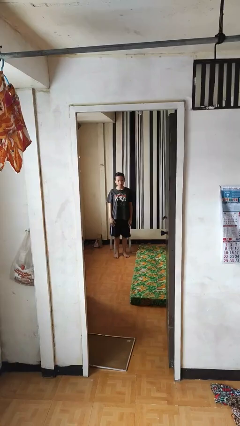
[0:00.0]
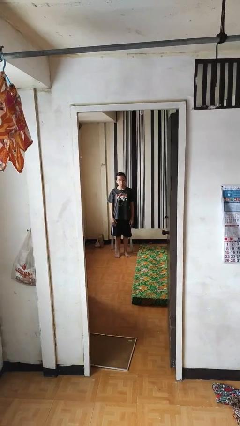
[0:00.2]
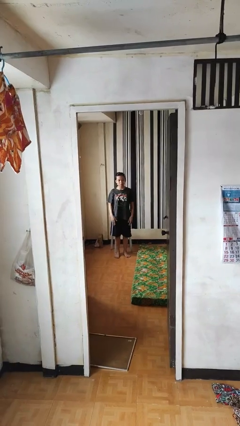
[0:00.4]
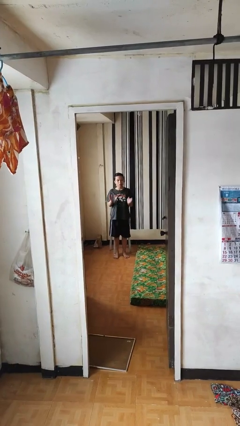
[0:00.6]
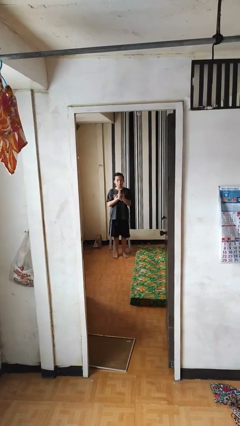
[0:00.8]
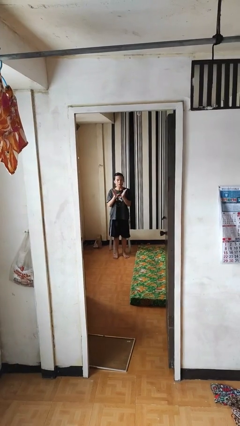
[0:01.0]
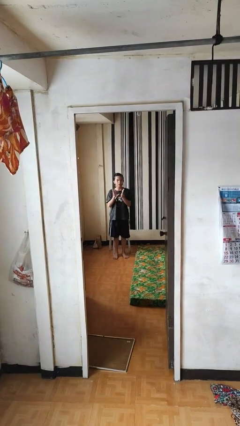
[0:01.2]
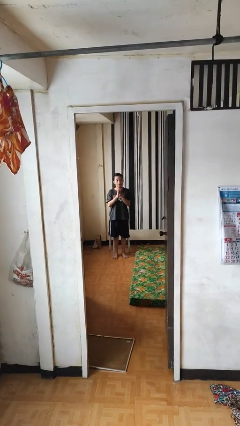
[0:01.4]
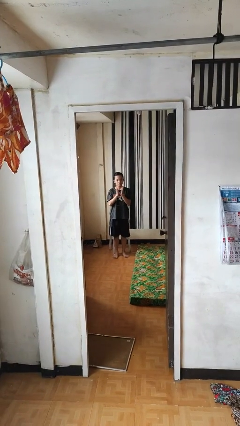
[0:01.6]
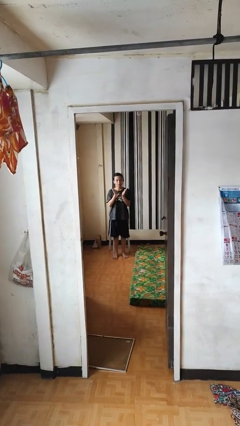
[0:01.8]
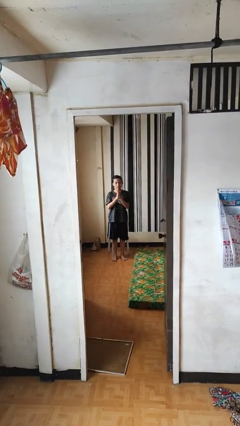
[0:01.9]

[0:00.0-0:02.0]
person claps hands

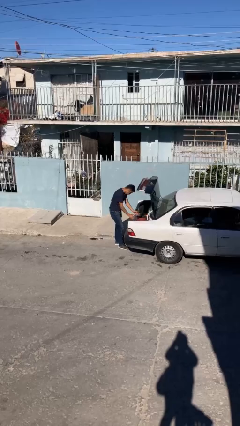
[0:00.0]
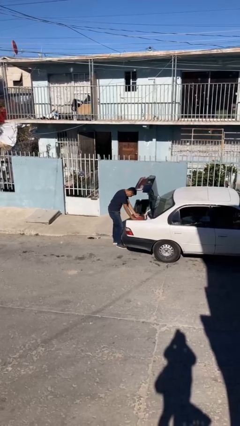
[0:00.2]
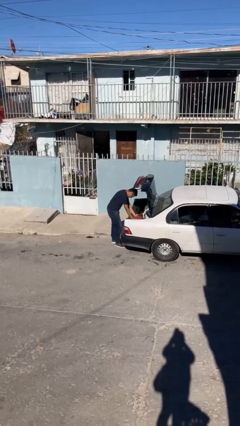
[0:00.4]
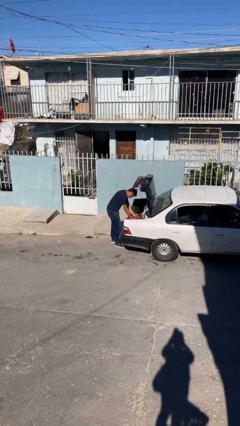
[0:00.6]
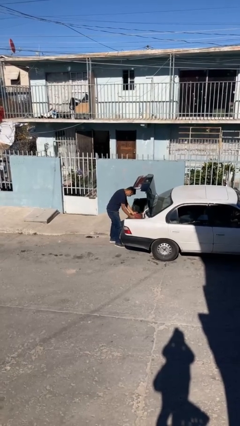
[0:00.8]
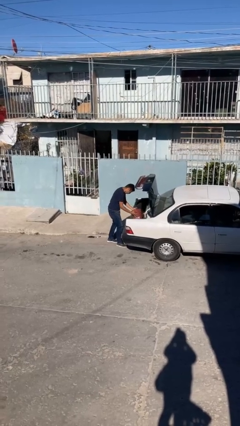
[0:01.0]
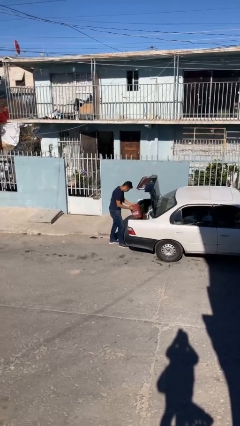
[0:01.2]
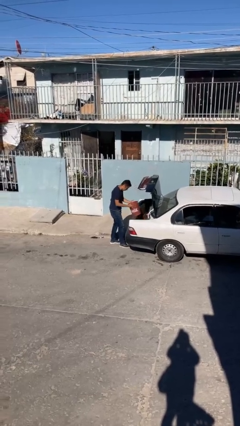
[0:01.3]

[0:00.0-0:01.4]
person unloads car

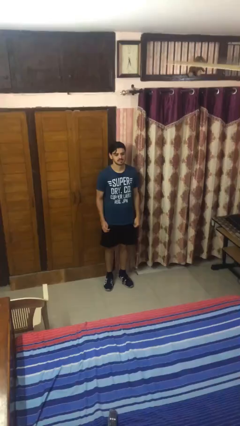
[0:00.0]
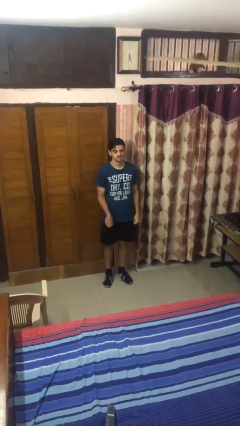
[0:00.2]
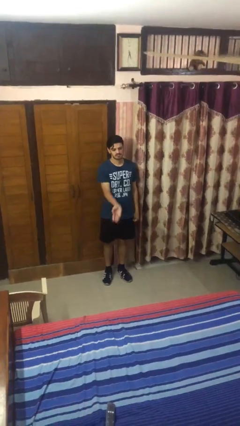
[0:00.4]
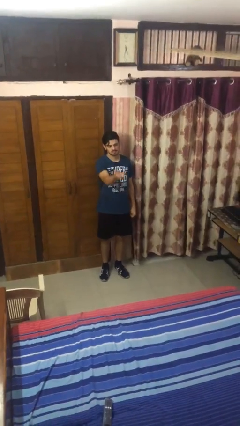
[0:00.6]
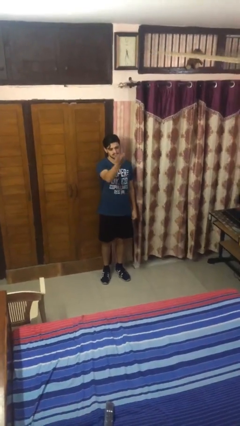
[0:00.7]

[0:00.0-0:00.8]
person gestures swipe up

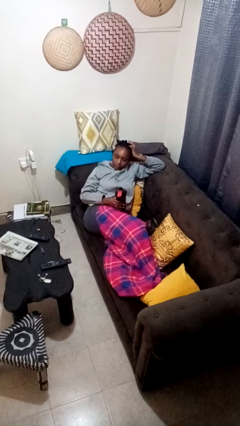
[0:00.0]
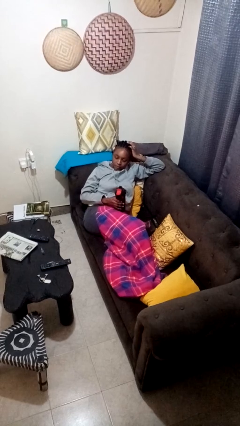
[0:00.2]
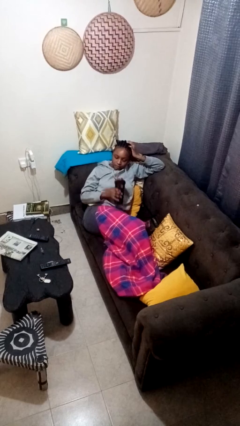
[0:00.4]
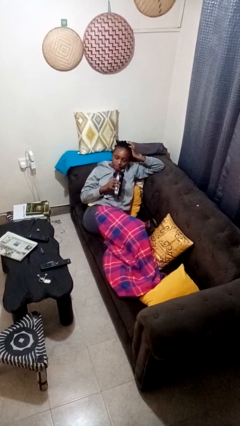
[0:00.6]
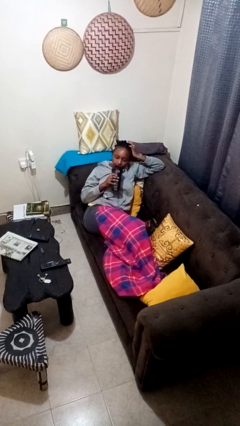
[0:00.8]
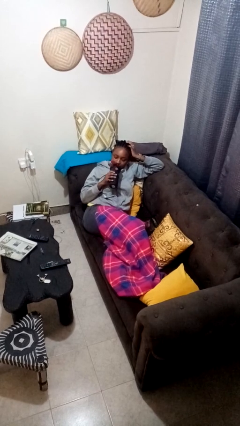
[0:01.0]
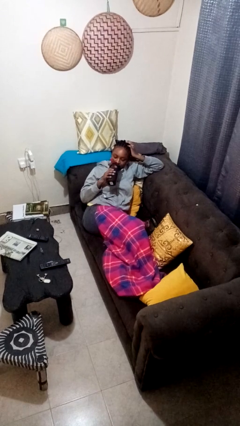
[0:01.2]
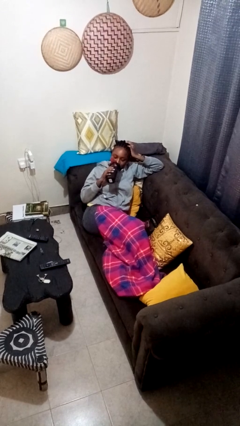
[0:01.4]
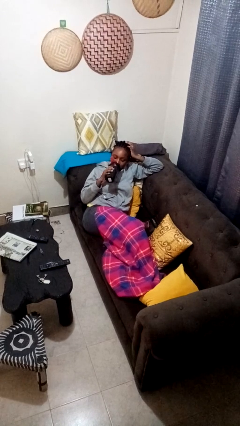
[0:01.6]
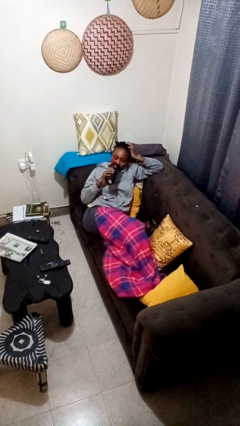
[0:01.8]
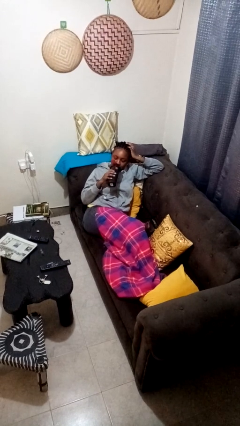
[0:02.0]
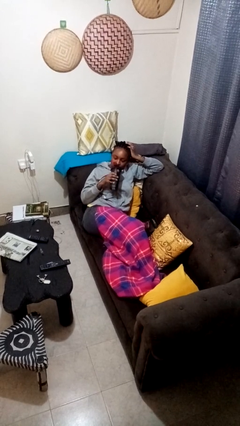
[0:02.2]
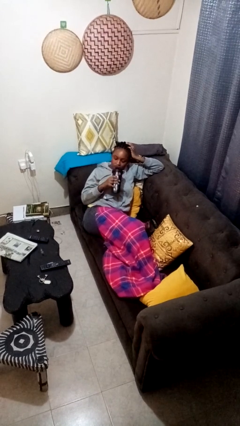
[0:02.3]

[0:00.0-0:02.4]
person drinks from bottle

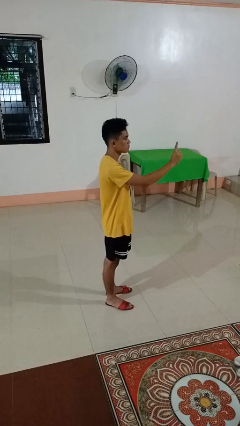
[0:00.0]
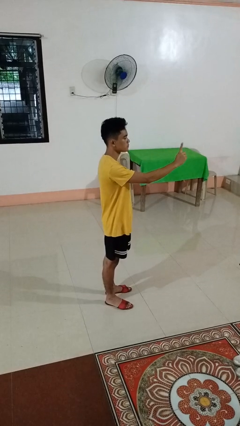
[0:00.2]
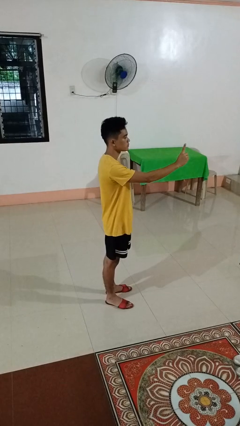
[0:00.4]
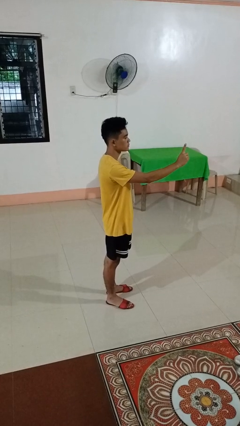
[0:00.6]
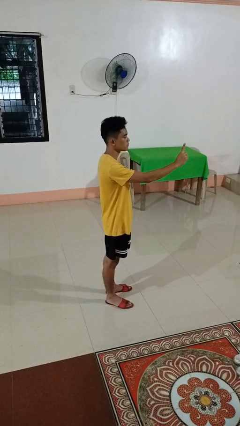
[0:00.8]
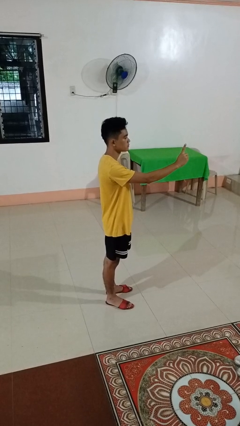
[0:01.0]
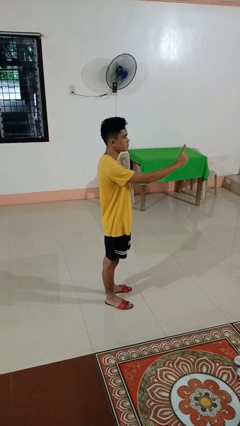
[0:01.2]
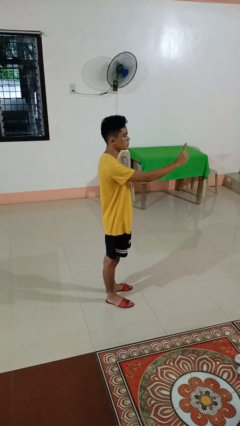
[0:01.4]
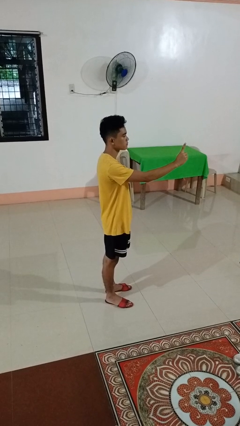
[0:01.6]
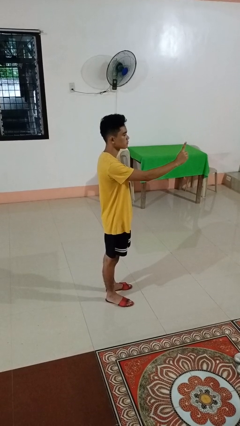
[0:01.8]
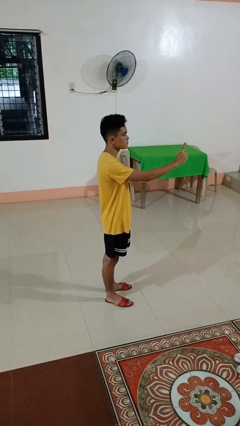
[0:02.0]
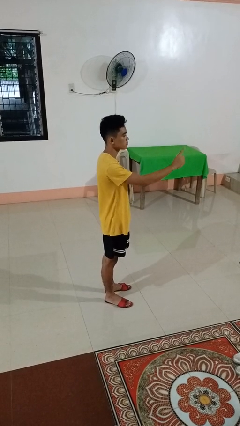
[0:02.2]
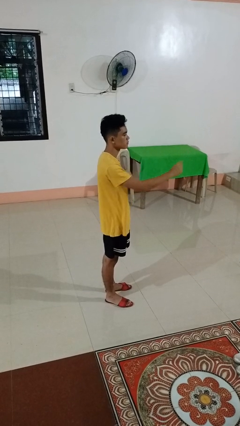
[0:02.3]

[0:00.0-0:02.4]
person gestures number one

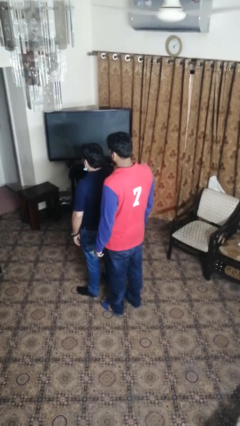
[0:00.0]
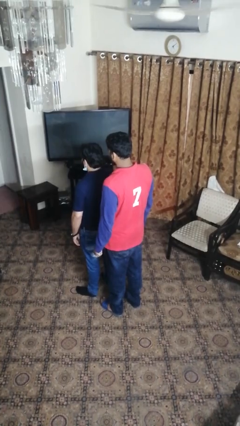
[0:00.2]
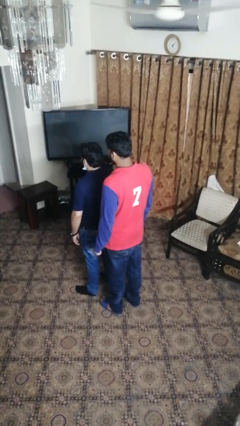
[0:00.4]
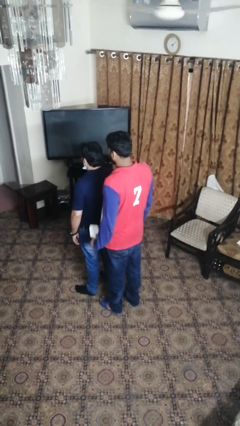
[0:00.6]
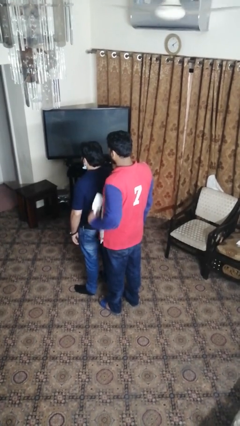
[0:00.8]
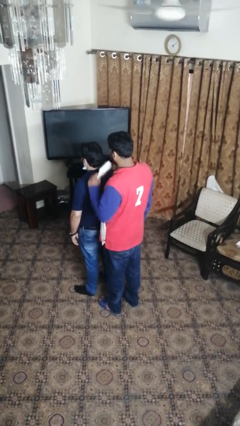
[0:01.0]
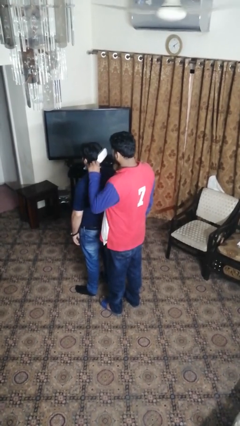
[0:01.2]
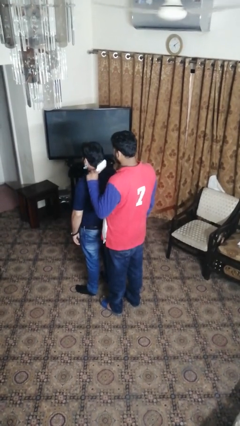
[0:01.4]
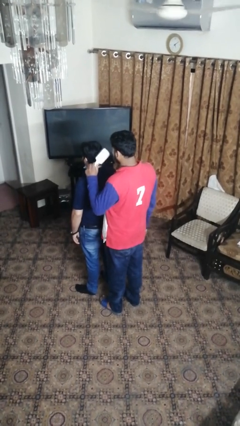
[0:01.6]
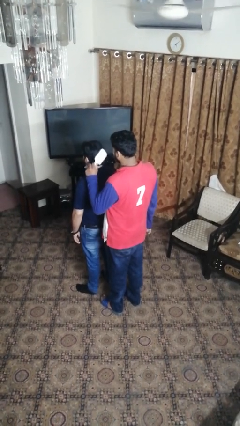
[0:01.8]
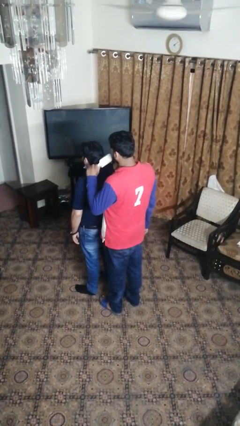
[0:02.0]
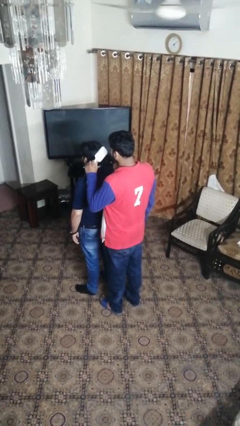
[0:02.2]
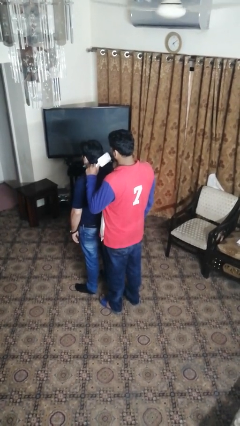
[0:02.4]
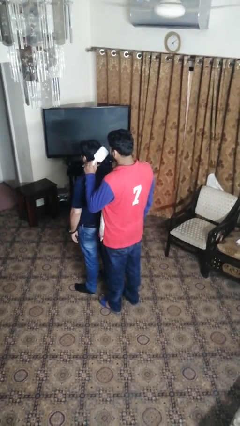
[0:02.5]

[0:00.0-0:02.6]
person brushes hair of person

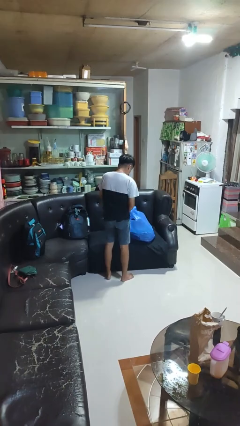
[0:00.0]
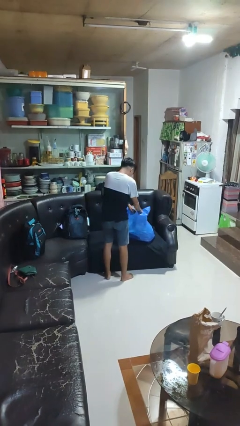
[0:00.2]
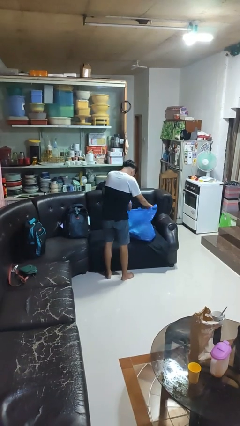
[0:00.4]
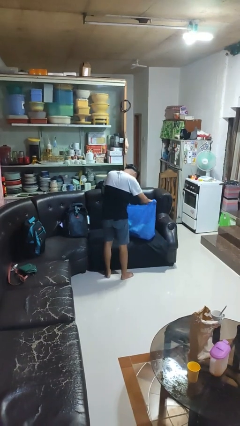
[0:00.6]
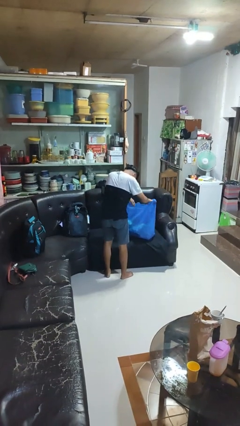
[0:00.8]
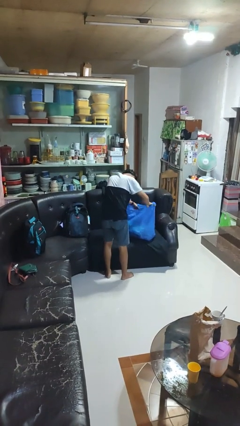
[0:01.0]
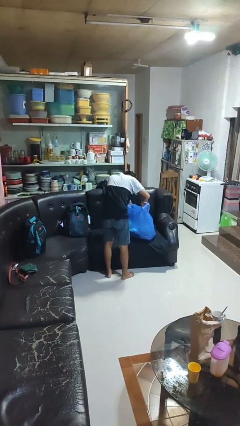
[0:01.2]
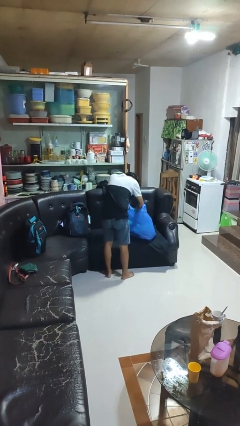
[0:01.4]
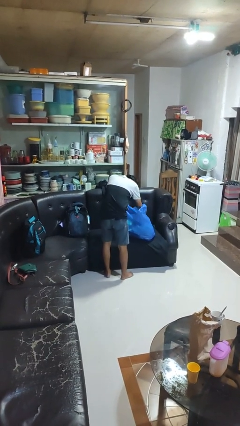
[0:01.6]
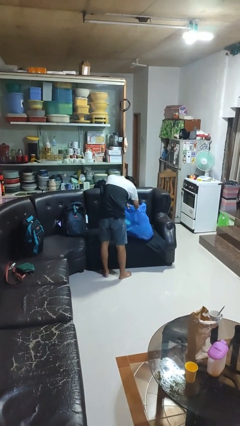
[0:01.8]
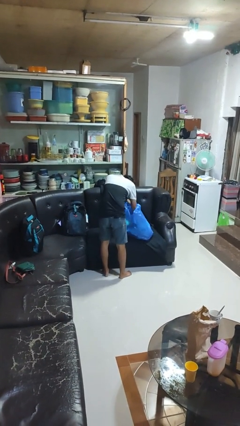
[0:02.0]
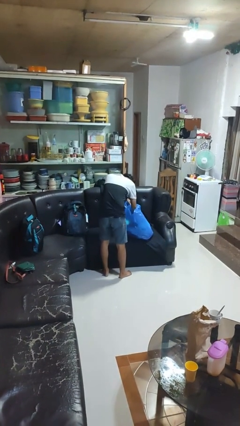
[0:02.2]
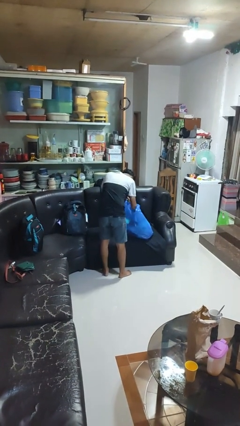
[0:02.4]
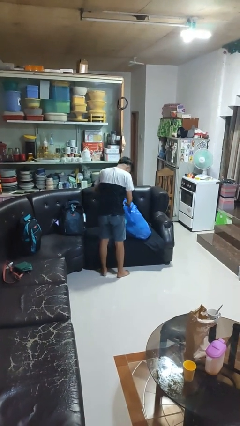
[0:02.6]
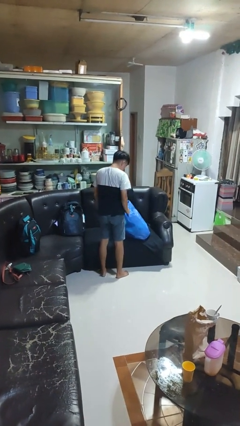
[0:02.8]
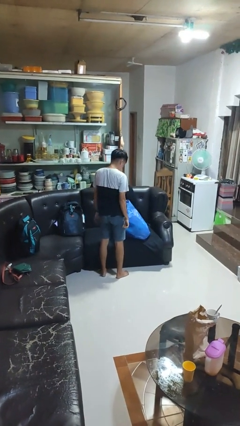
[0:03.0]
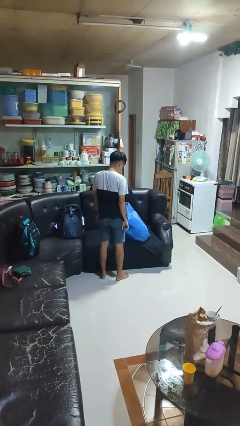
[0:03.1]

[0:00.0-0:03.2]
person searches in bag

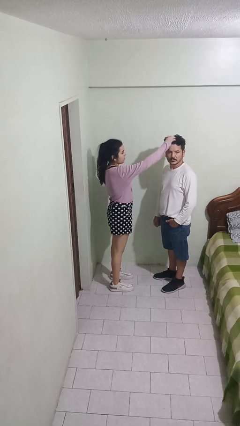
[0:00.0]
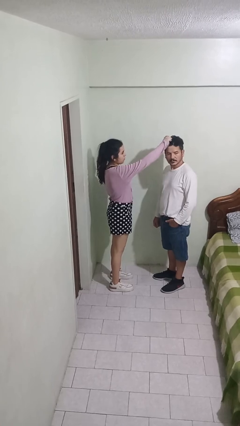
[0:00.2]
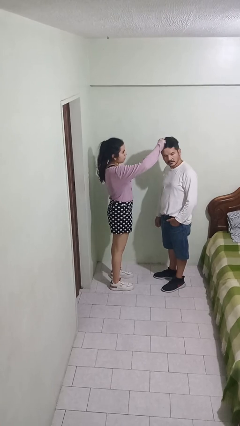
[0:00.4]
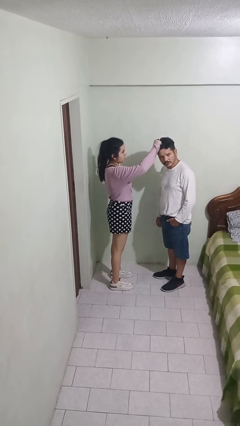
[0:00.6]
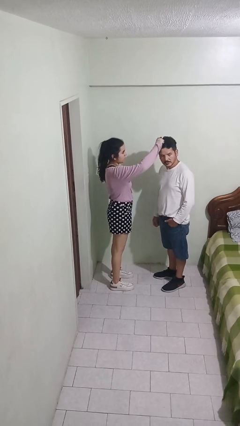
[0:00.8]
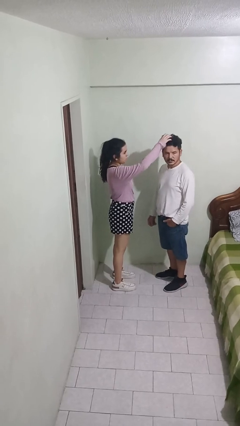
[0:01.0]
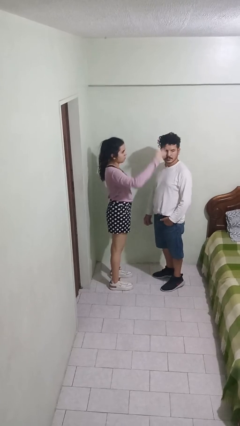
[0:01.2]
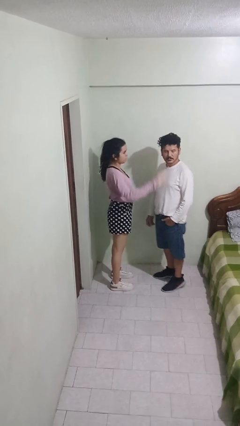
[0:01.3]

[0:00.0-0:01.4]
person grabs person by hair

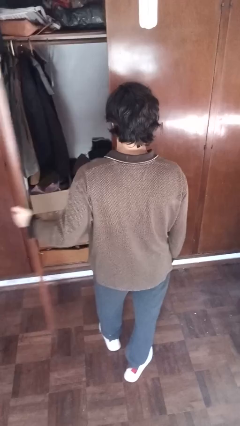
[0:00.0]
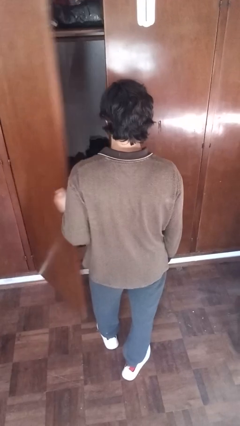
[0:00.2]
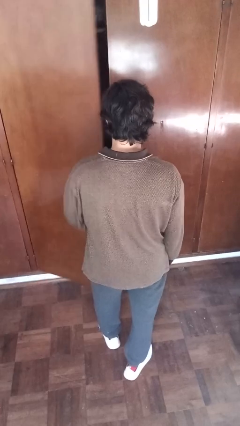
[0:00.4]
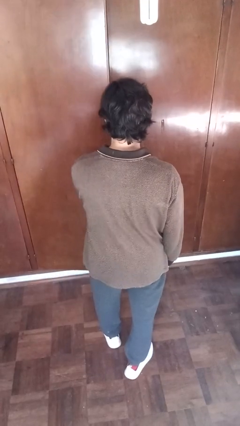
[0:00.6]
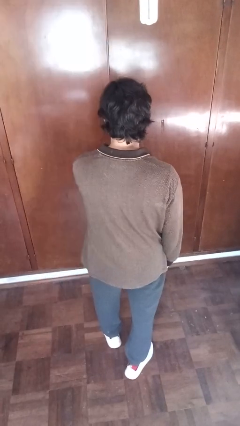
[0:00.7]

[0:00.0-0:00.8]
person closes closet door
